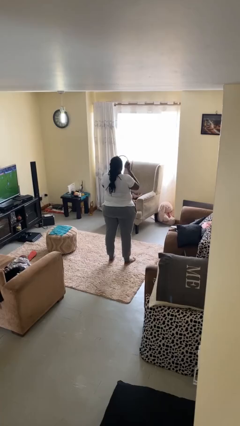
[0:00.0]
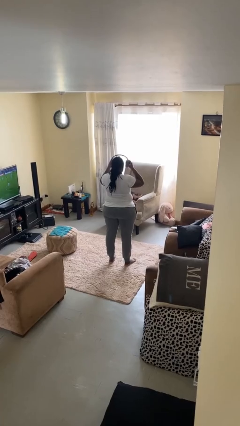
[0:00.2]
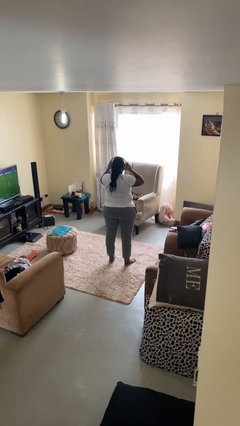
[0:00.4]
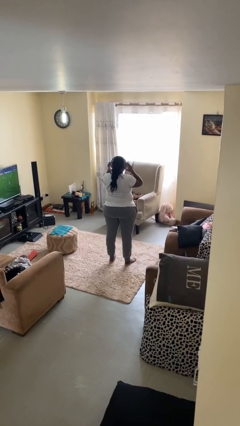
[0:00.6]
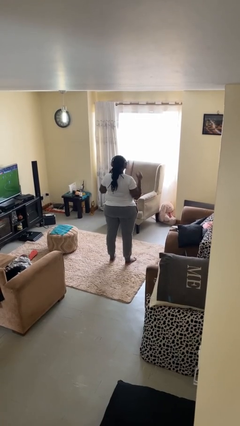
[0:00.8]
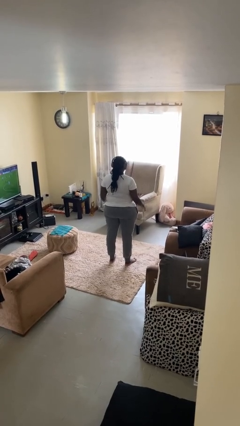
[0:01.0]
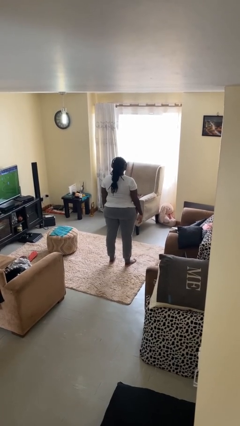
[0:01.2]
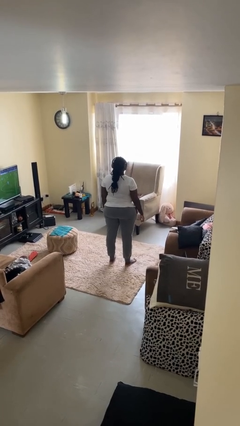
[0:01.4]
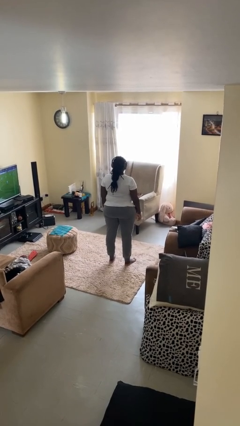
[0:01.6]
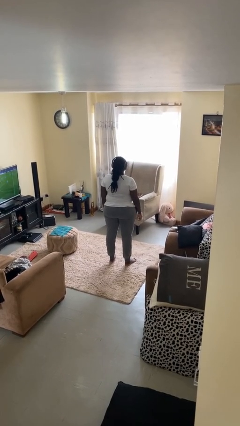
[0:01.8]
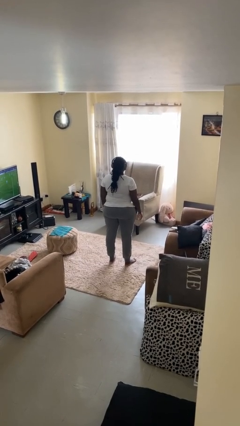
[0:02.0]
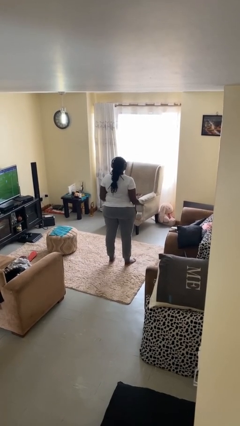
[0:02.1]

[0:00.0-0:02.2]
person puts on headphones

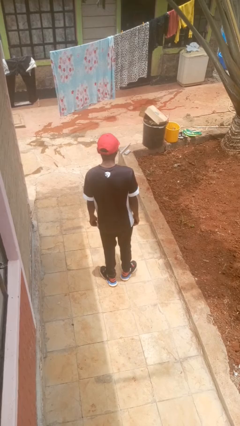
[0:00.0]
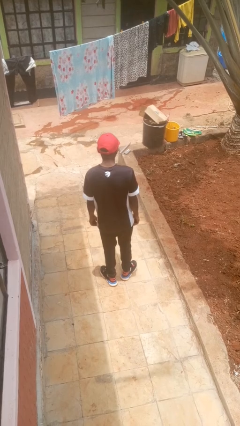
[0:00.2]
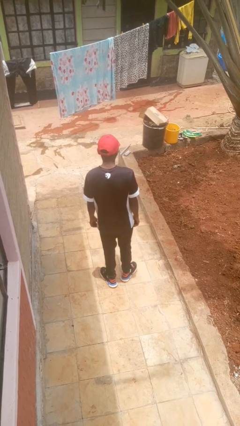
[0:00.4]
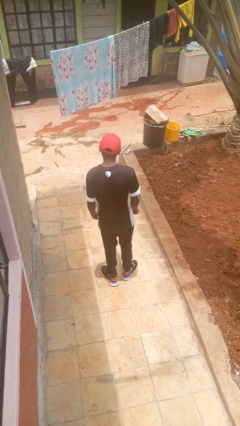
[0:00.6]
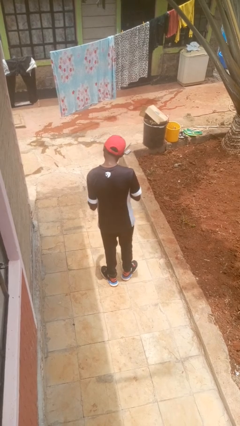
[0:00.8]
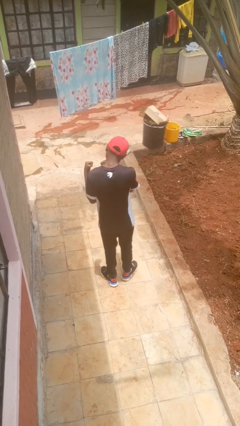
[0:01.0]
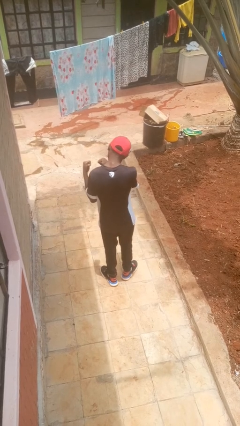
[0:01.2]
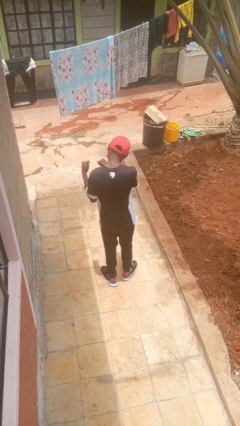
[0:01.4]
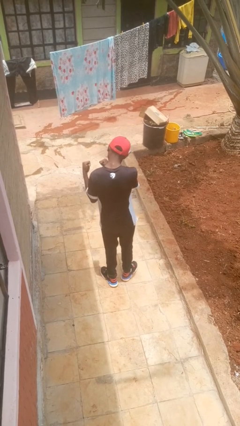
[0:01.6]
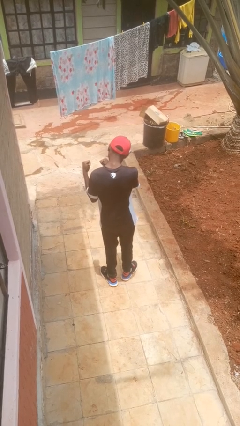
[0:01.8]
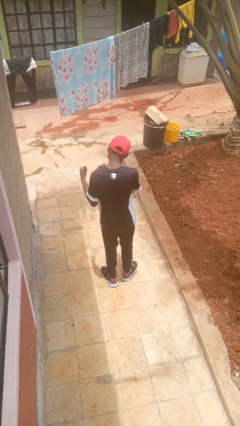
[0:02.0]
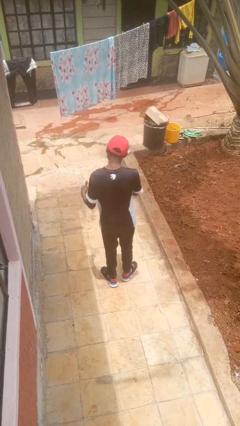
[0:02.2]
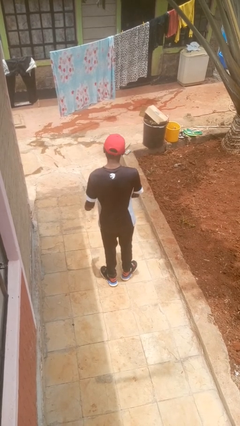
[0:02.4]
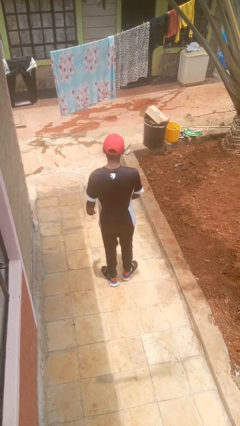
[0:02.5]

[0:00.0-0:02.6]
person gestures behind me

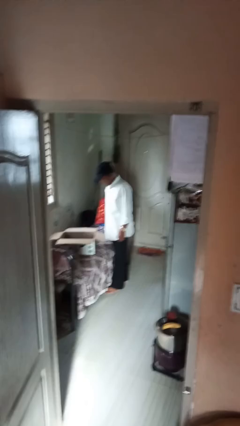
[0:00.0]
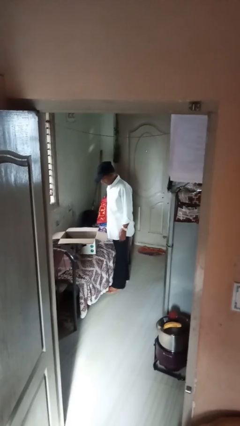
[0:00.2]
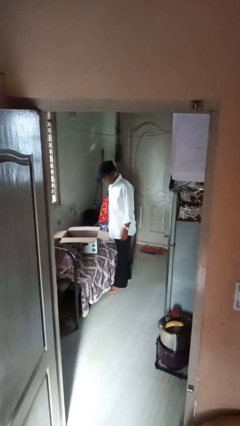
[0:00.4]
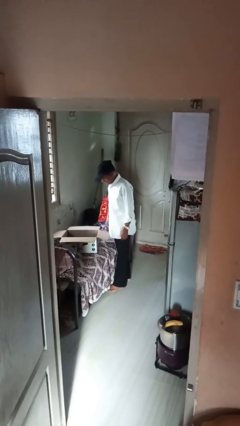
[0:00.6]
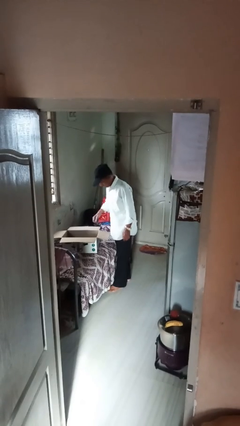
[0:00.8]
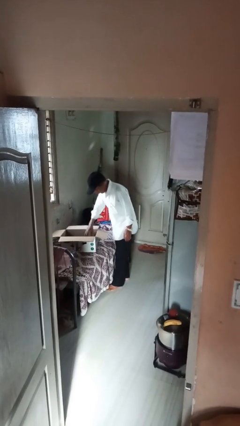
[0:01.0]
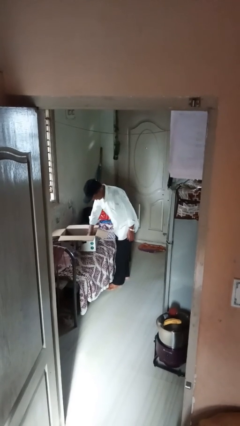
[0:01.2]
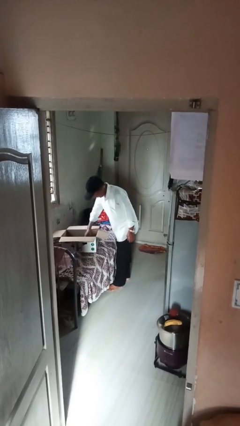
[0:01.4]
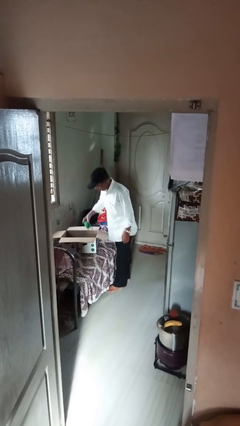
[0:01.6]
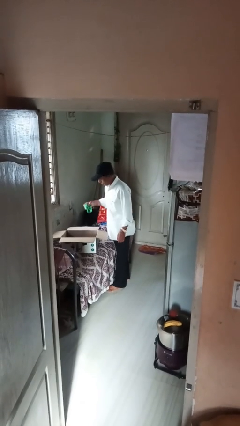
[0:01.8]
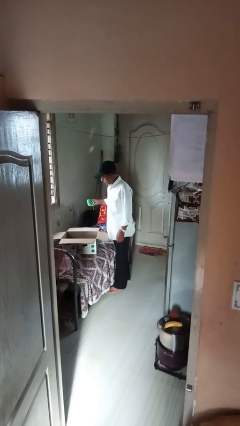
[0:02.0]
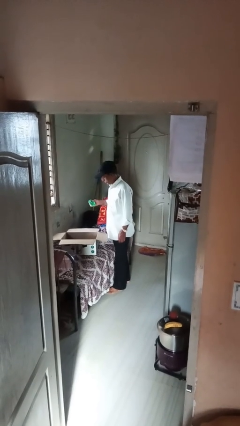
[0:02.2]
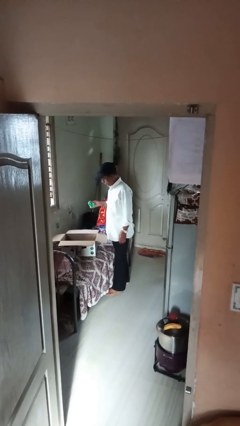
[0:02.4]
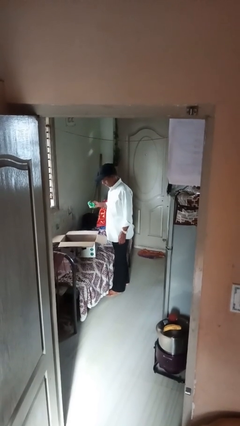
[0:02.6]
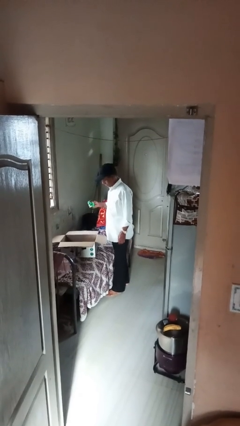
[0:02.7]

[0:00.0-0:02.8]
person takes object from box

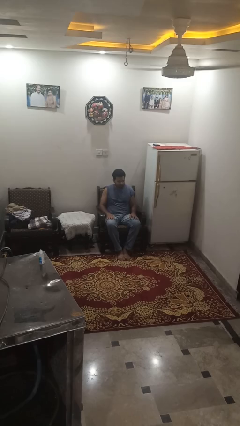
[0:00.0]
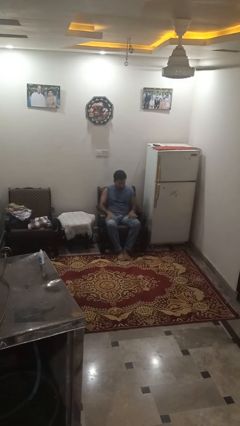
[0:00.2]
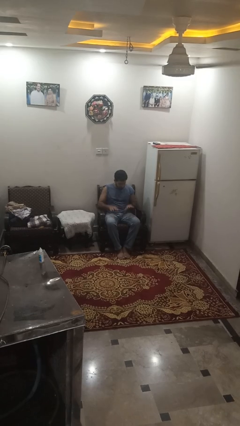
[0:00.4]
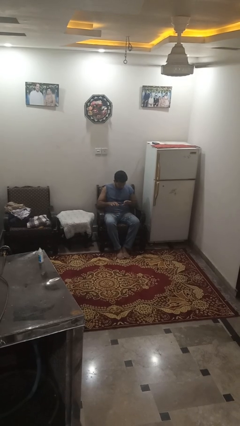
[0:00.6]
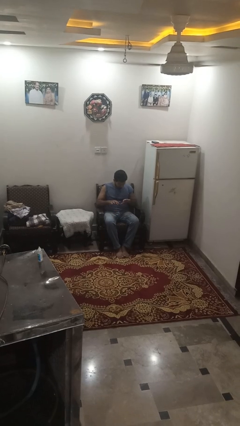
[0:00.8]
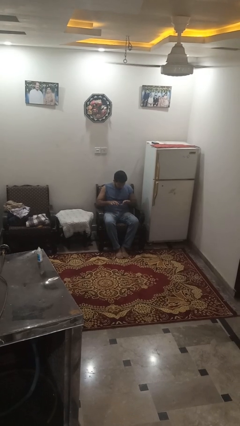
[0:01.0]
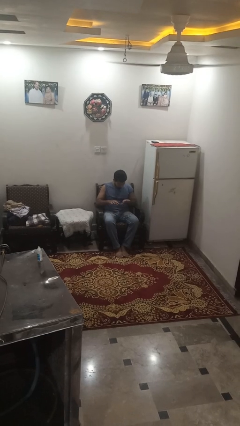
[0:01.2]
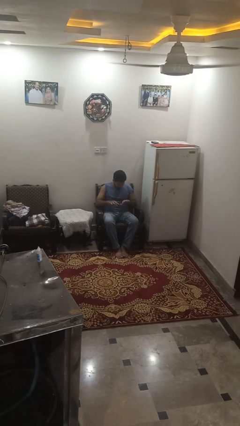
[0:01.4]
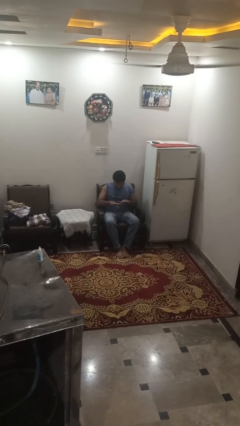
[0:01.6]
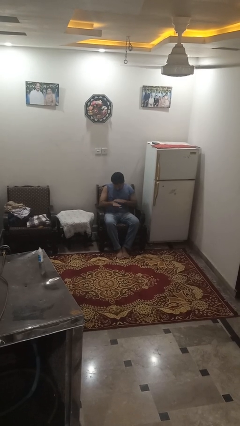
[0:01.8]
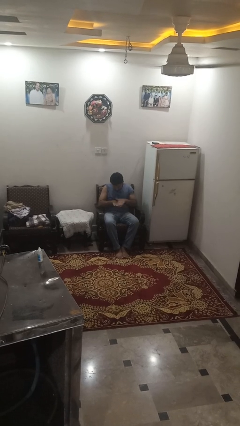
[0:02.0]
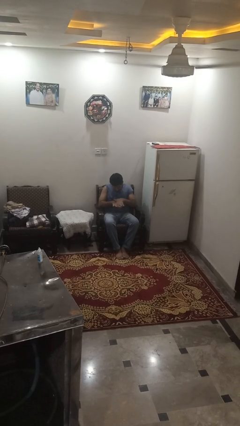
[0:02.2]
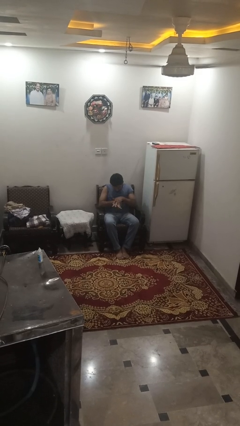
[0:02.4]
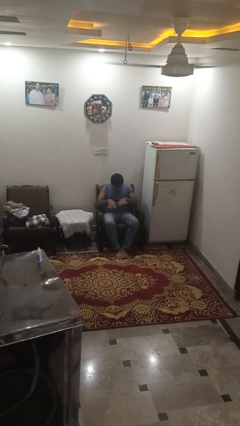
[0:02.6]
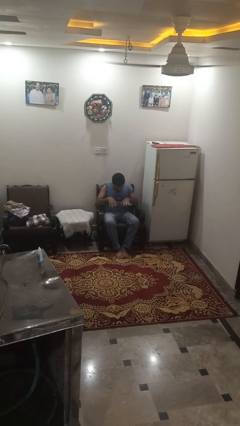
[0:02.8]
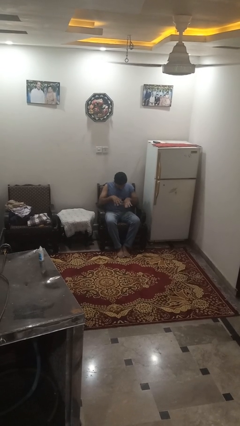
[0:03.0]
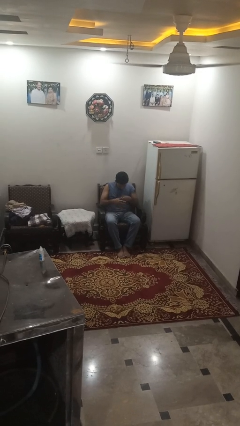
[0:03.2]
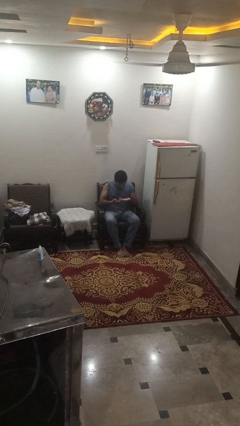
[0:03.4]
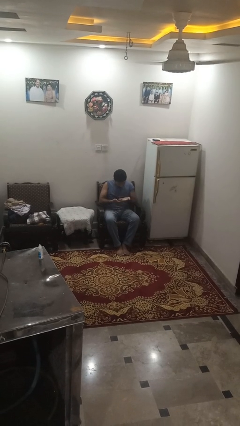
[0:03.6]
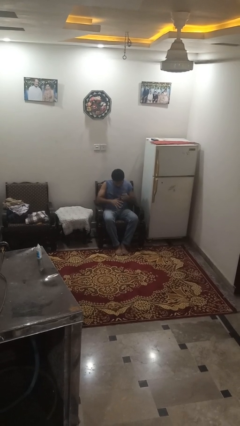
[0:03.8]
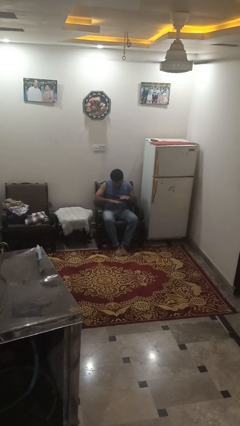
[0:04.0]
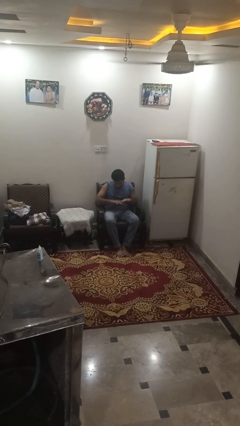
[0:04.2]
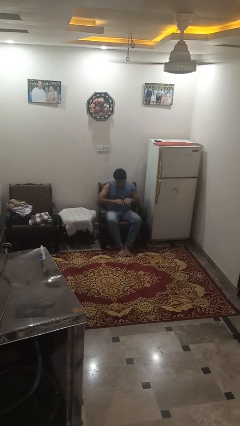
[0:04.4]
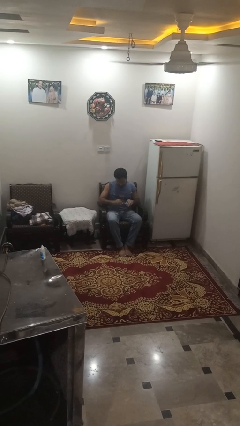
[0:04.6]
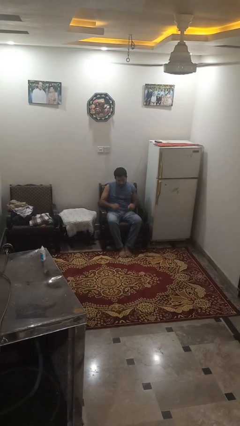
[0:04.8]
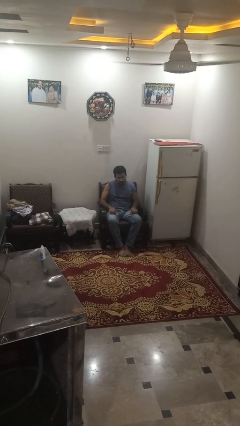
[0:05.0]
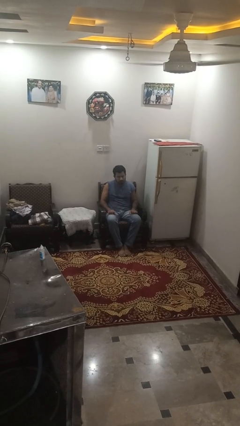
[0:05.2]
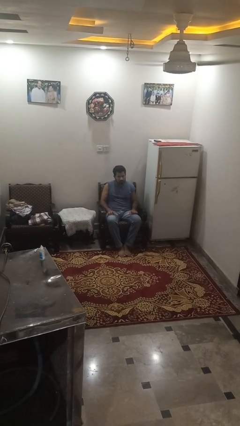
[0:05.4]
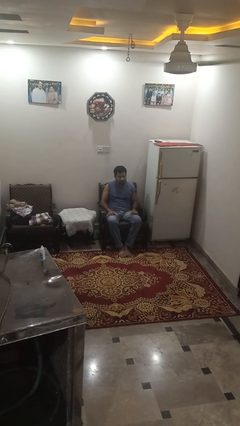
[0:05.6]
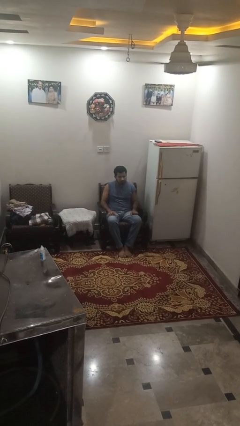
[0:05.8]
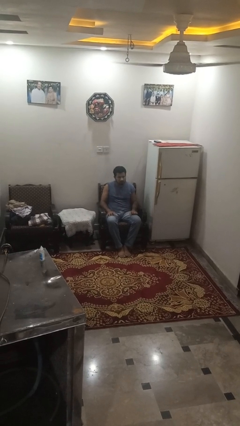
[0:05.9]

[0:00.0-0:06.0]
person looks at hands in lap

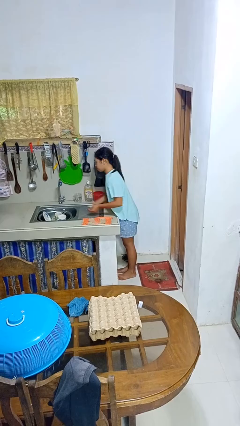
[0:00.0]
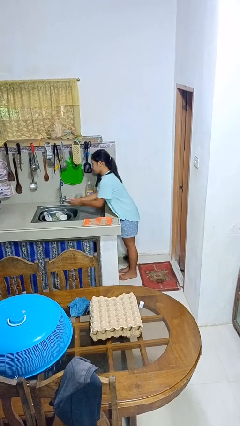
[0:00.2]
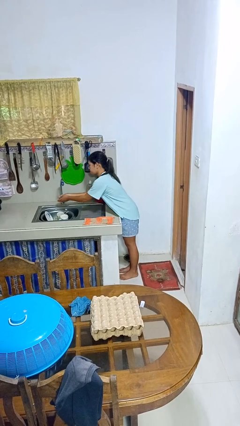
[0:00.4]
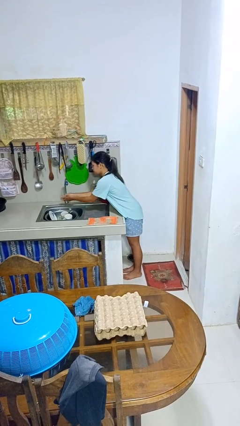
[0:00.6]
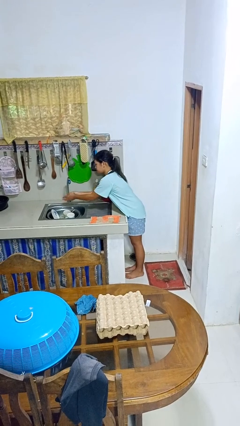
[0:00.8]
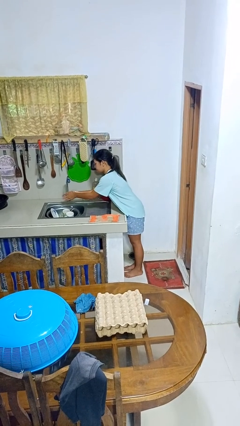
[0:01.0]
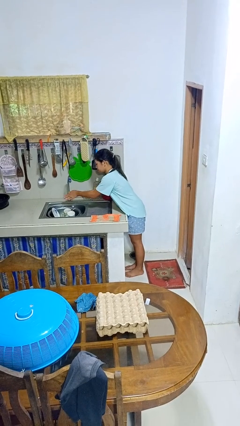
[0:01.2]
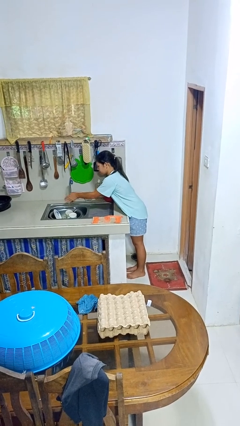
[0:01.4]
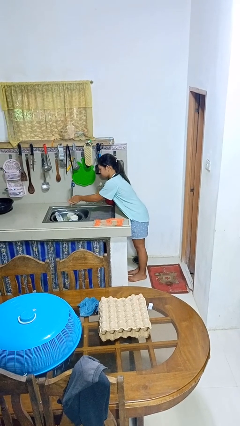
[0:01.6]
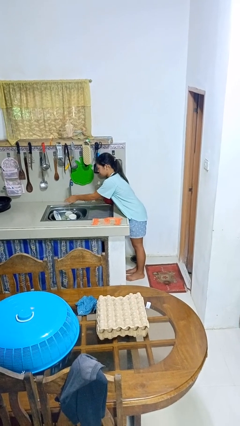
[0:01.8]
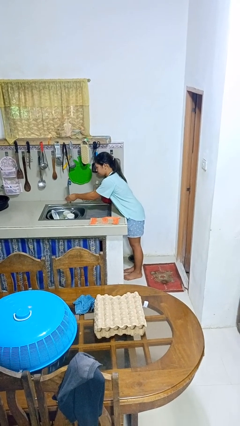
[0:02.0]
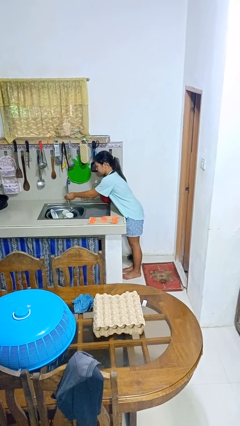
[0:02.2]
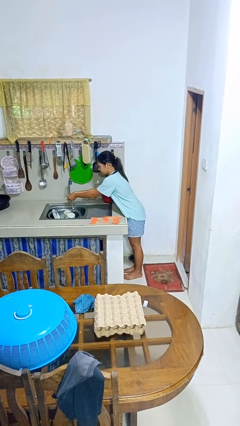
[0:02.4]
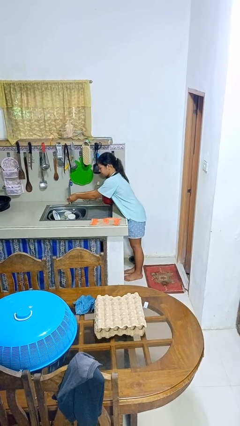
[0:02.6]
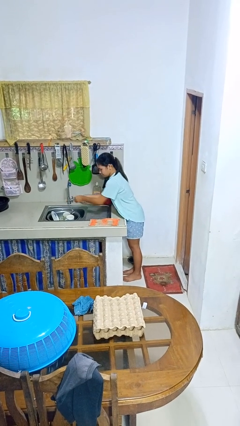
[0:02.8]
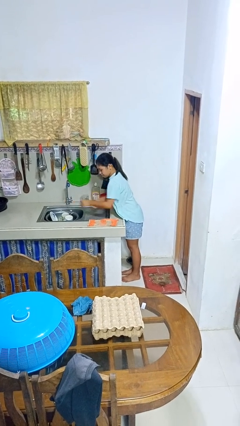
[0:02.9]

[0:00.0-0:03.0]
person washes hands

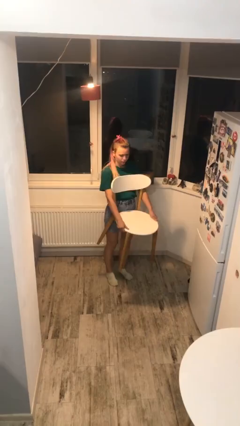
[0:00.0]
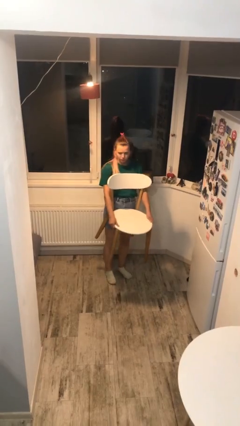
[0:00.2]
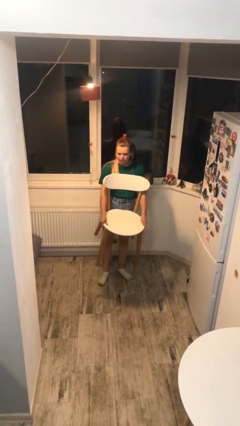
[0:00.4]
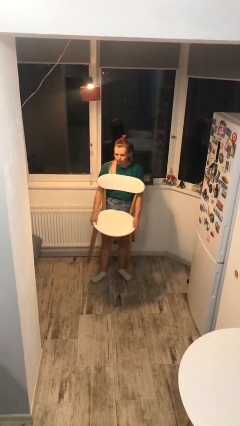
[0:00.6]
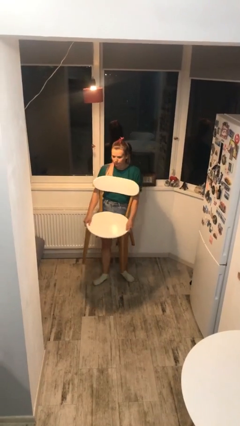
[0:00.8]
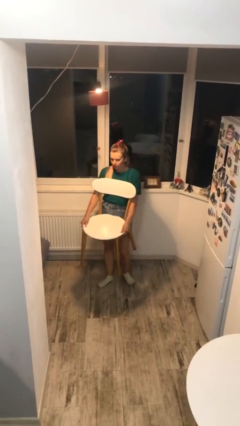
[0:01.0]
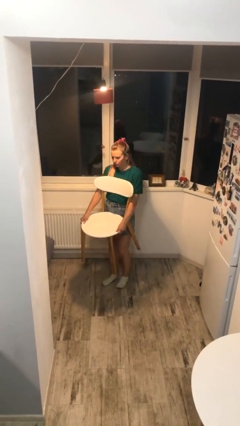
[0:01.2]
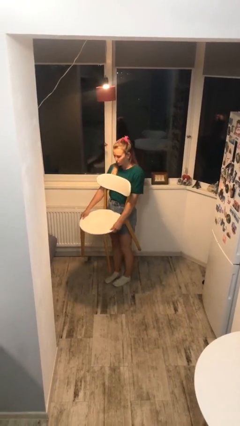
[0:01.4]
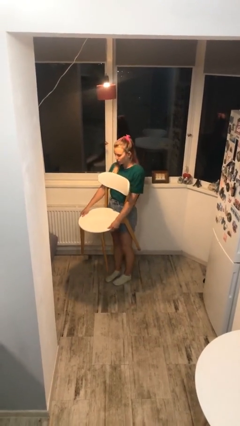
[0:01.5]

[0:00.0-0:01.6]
person carries furniture
